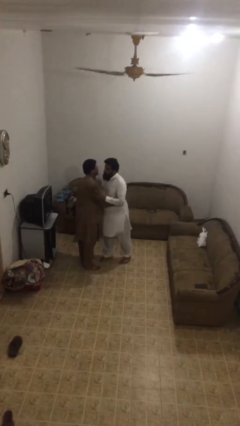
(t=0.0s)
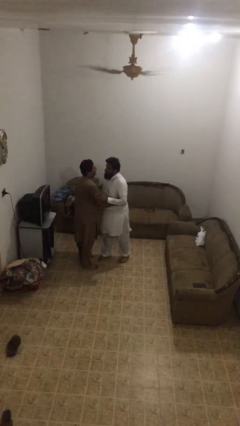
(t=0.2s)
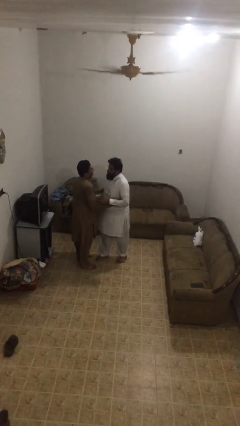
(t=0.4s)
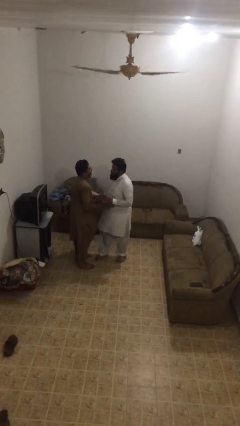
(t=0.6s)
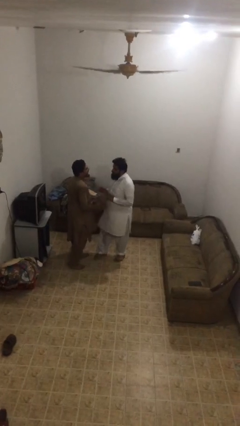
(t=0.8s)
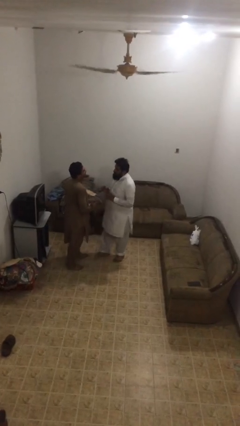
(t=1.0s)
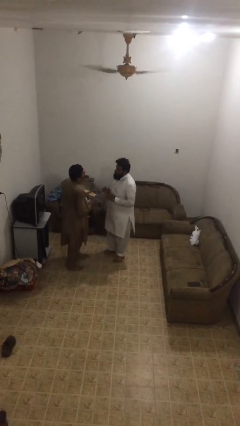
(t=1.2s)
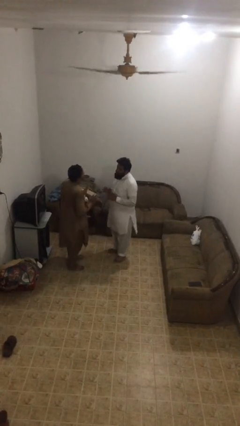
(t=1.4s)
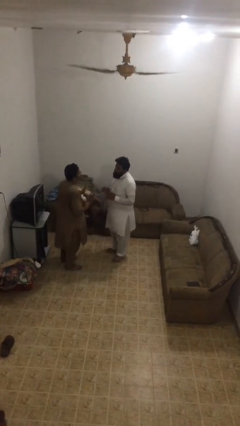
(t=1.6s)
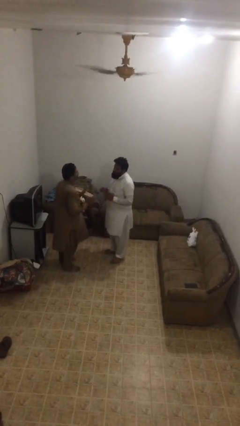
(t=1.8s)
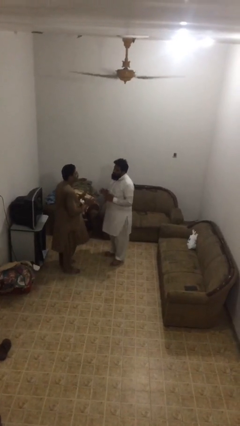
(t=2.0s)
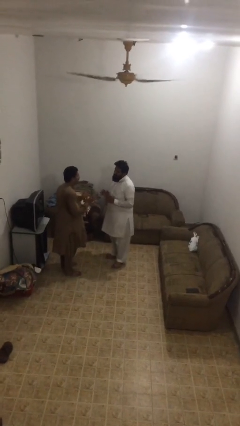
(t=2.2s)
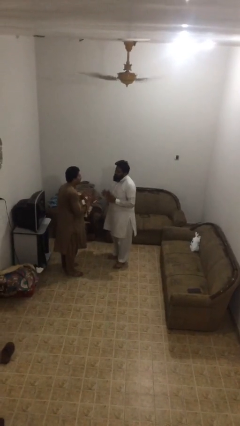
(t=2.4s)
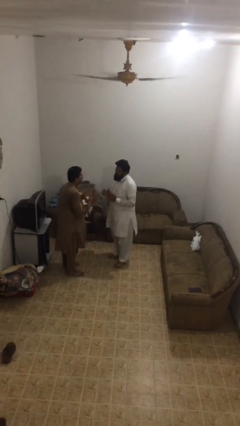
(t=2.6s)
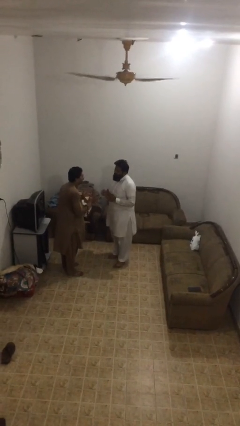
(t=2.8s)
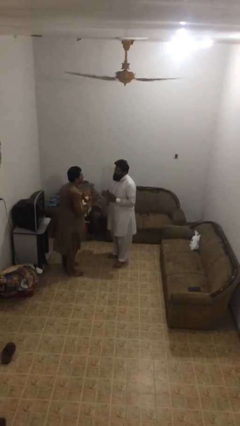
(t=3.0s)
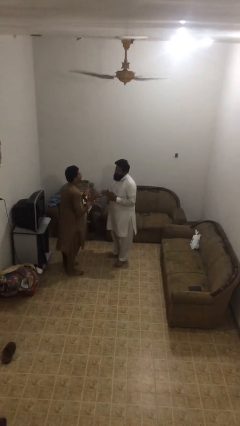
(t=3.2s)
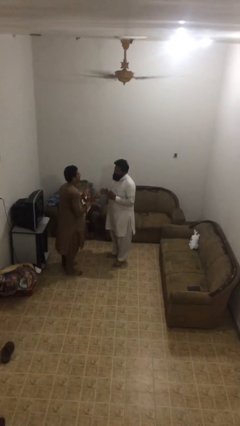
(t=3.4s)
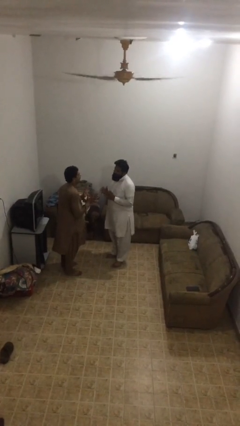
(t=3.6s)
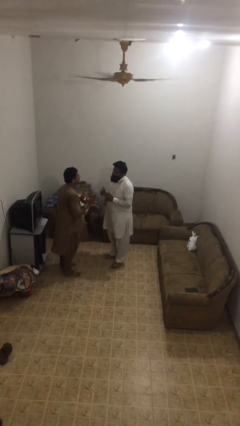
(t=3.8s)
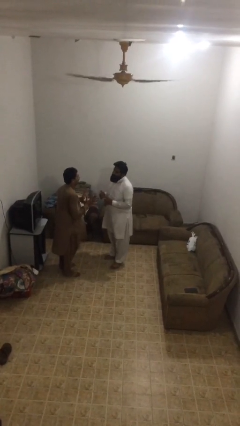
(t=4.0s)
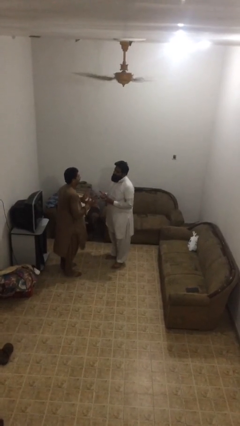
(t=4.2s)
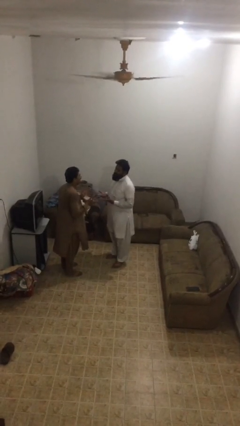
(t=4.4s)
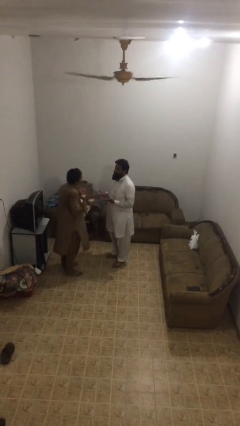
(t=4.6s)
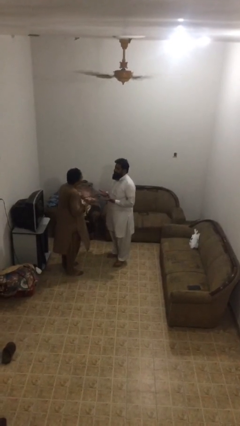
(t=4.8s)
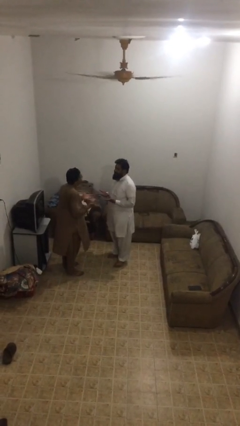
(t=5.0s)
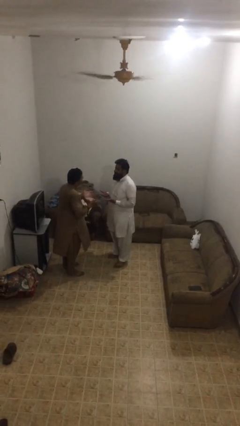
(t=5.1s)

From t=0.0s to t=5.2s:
person talks to person

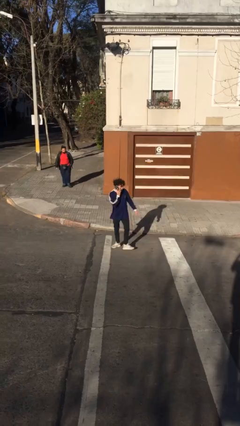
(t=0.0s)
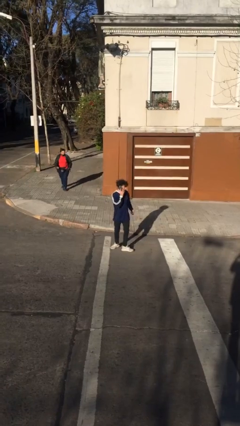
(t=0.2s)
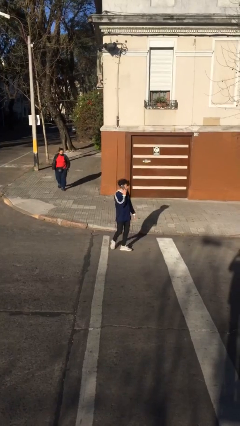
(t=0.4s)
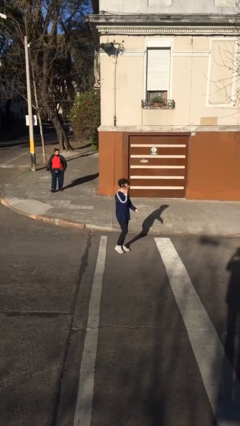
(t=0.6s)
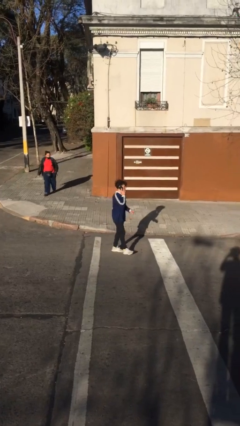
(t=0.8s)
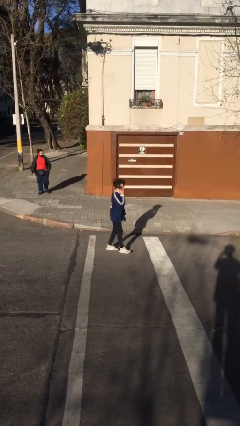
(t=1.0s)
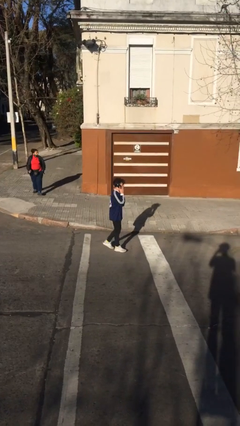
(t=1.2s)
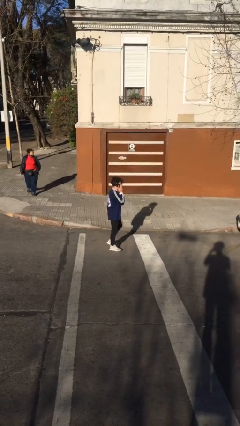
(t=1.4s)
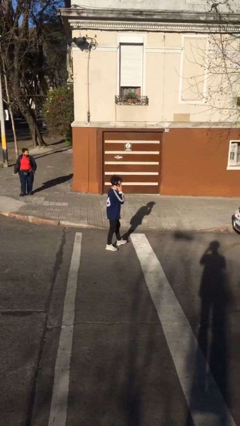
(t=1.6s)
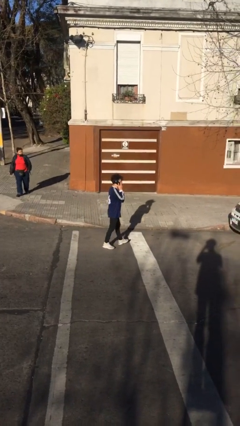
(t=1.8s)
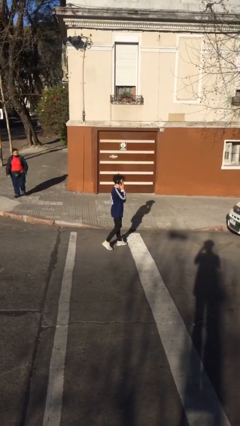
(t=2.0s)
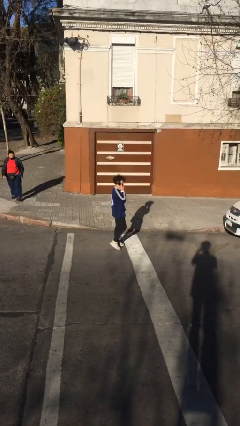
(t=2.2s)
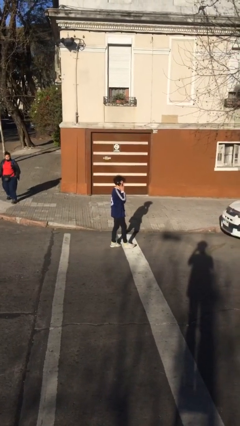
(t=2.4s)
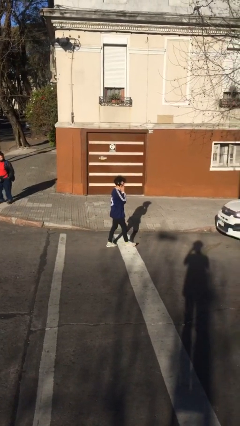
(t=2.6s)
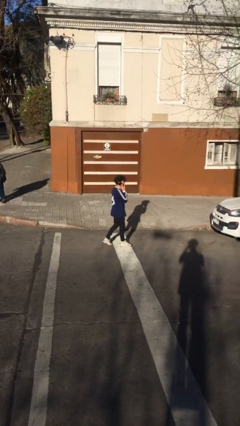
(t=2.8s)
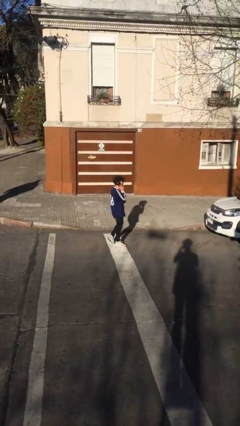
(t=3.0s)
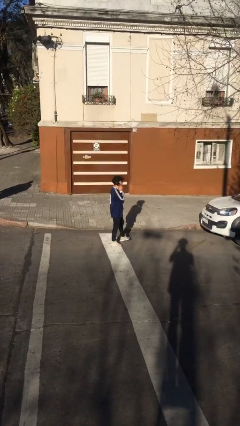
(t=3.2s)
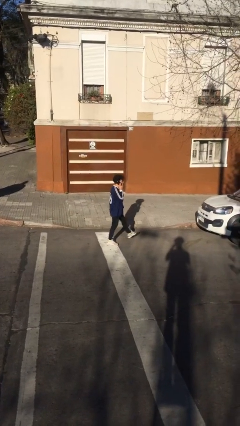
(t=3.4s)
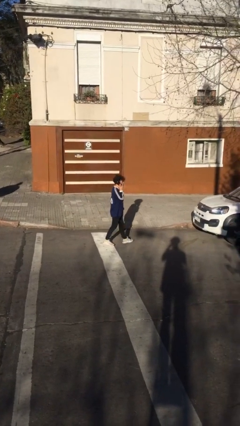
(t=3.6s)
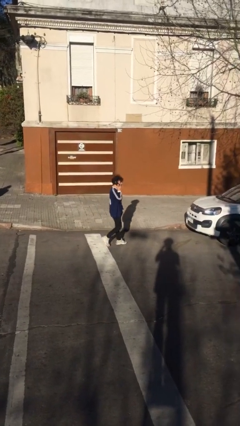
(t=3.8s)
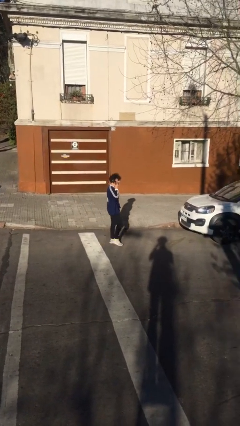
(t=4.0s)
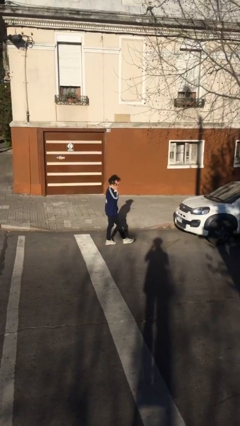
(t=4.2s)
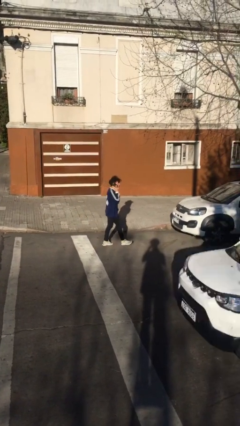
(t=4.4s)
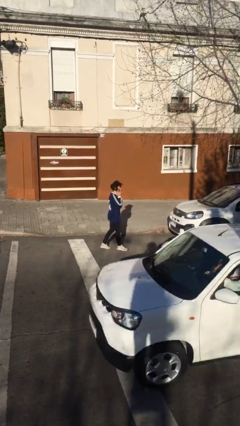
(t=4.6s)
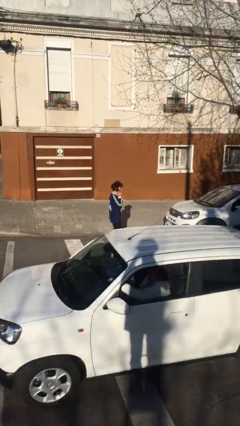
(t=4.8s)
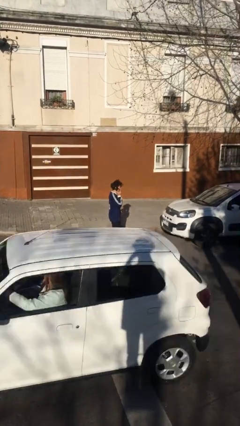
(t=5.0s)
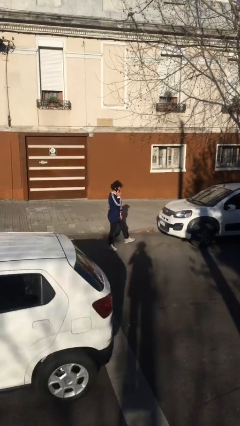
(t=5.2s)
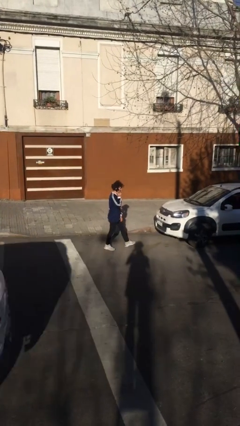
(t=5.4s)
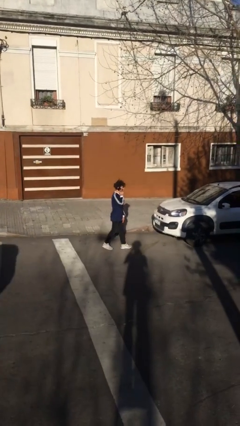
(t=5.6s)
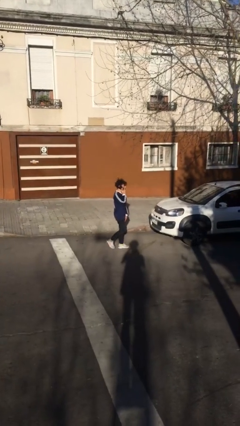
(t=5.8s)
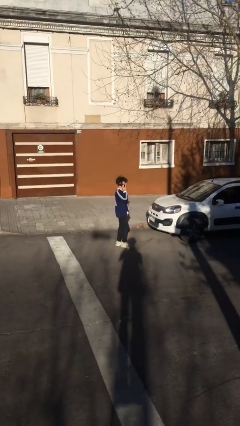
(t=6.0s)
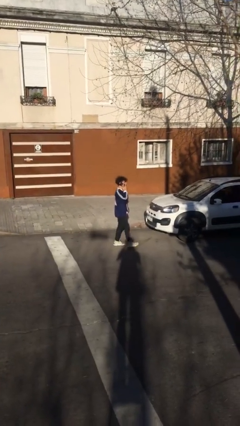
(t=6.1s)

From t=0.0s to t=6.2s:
person talks on phone

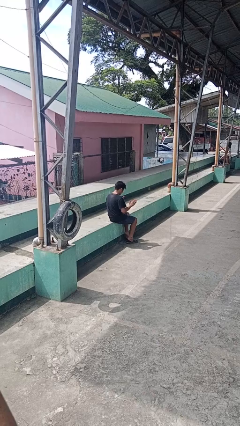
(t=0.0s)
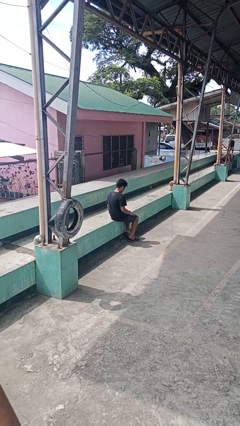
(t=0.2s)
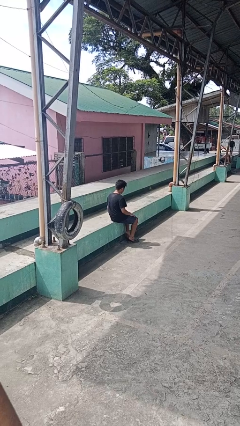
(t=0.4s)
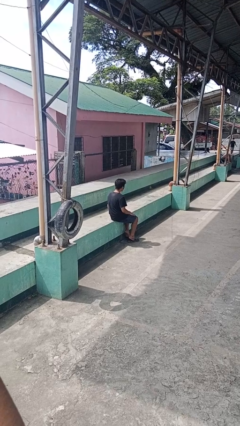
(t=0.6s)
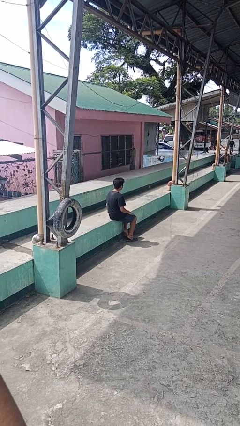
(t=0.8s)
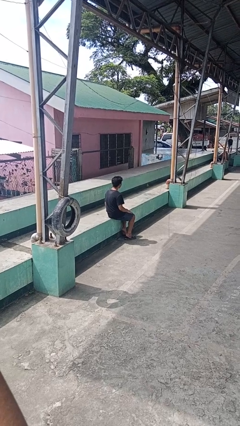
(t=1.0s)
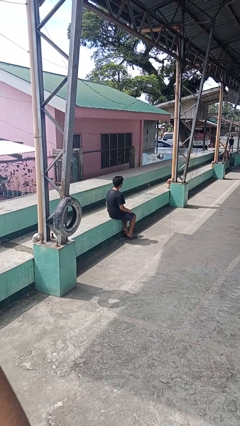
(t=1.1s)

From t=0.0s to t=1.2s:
person slaps hands on thighs

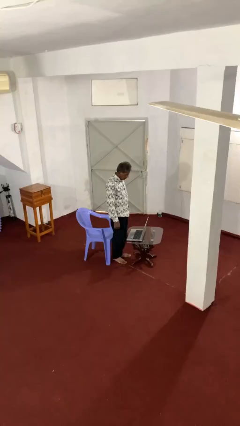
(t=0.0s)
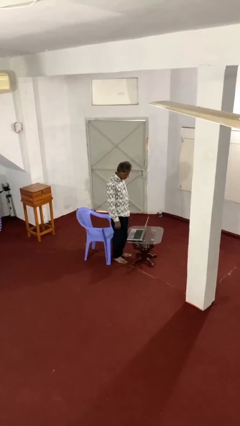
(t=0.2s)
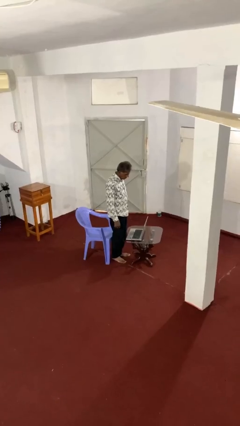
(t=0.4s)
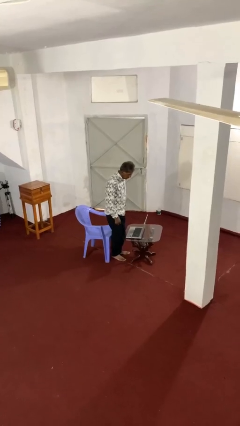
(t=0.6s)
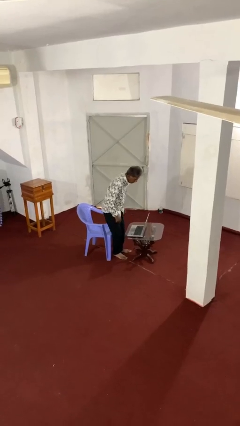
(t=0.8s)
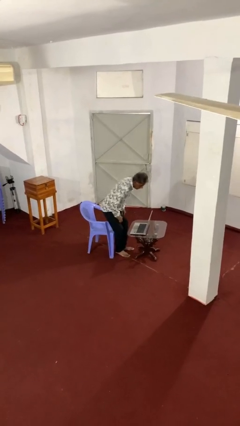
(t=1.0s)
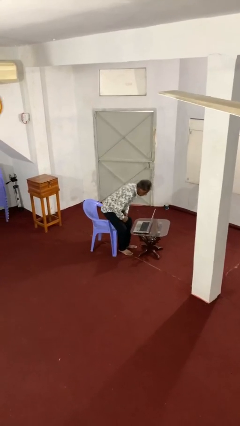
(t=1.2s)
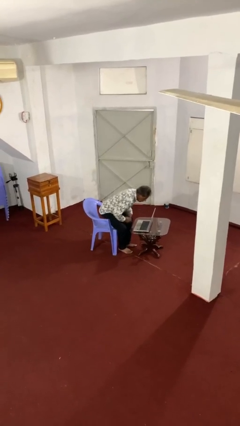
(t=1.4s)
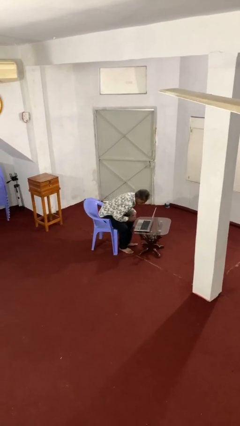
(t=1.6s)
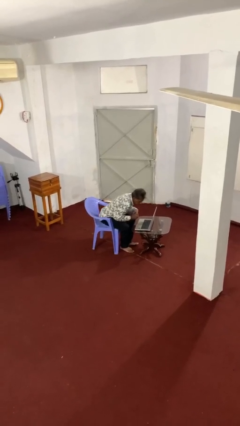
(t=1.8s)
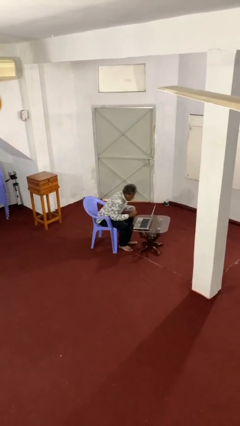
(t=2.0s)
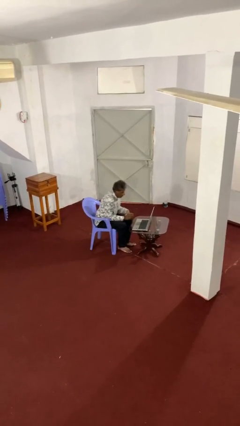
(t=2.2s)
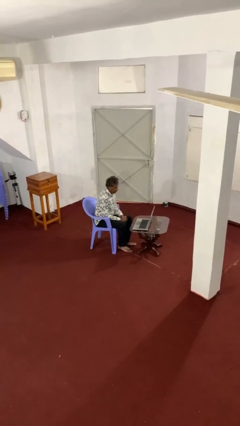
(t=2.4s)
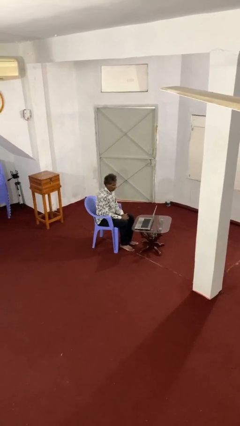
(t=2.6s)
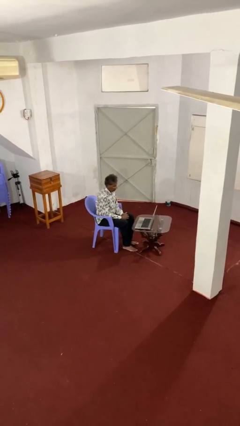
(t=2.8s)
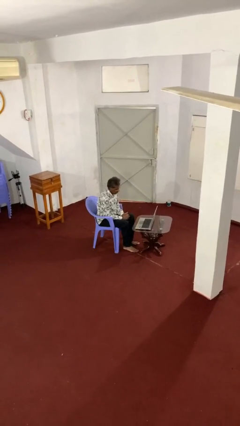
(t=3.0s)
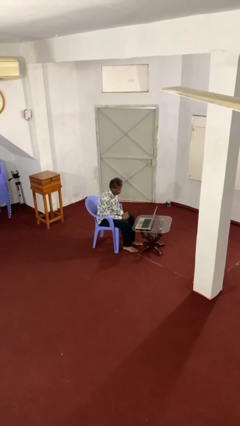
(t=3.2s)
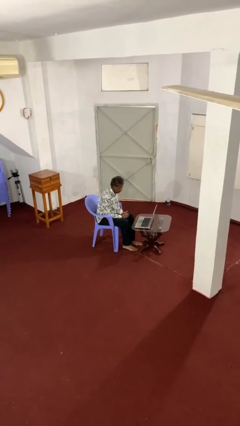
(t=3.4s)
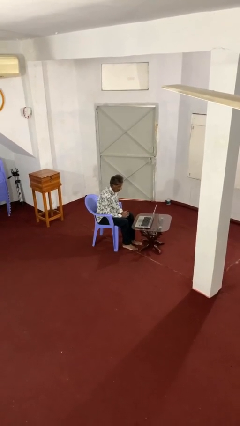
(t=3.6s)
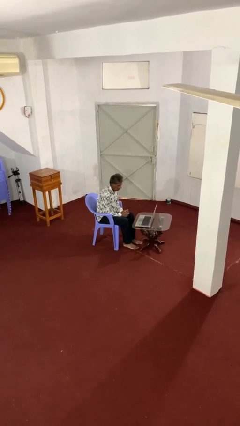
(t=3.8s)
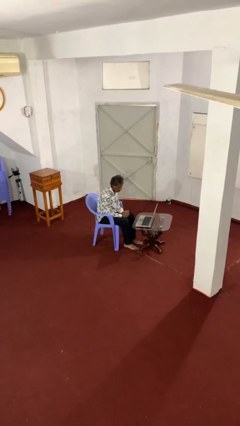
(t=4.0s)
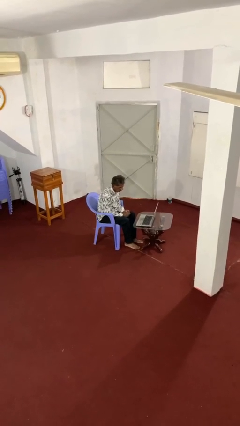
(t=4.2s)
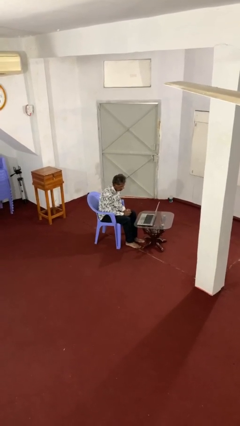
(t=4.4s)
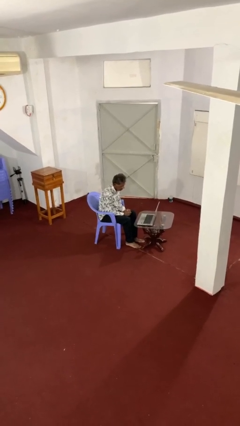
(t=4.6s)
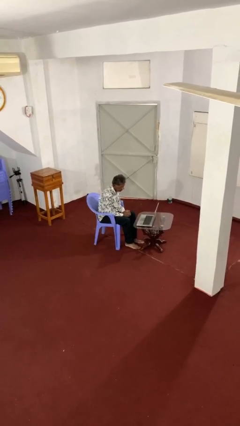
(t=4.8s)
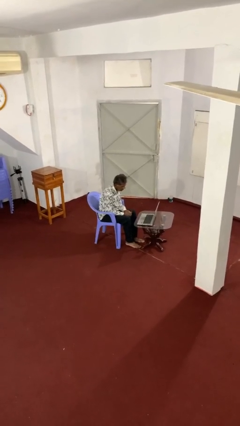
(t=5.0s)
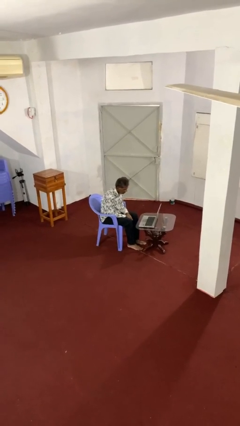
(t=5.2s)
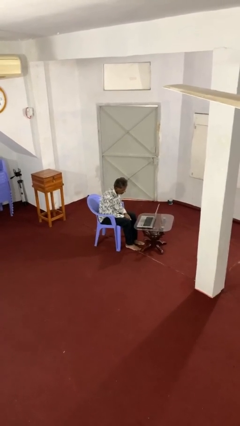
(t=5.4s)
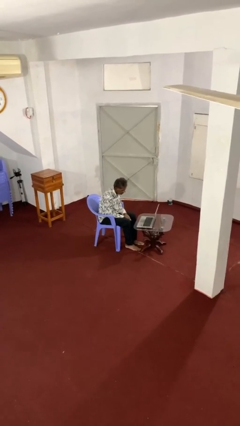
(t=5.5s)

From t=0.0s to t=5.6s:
person sits down
